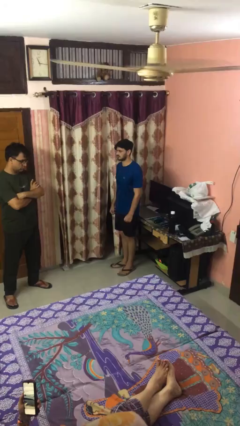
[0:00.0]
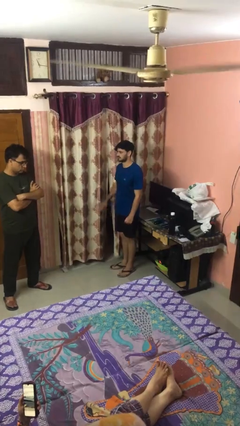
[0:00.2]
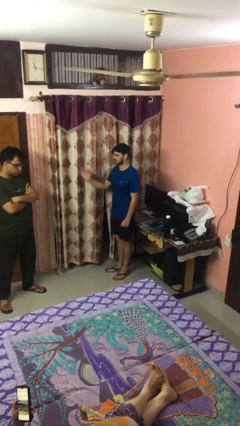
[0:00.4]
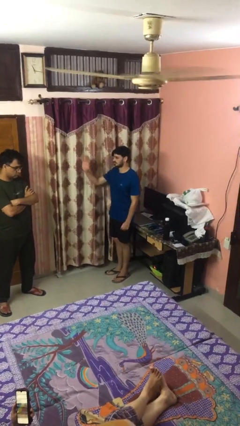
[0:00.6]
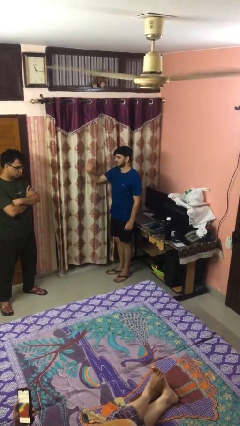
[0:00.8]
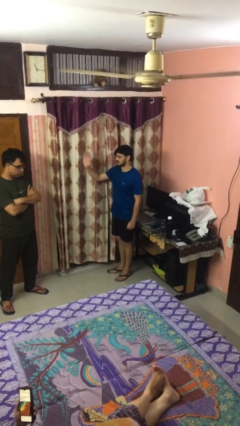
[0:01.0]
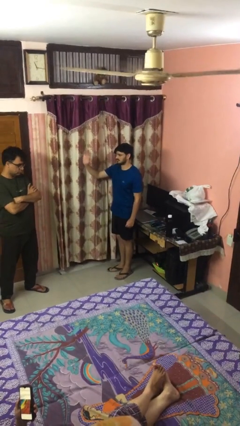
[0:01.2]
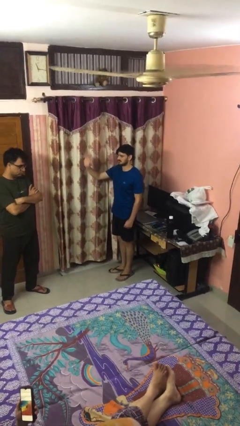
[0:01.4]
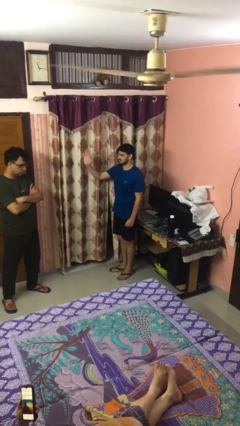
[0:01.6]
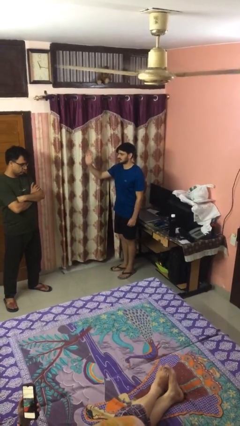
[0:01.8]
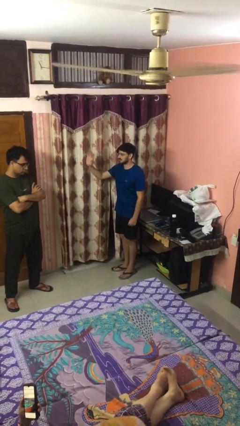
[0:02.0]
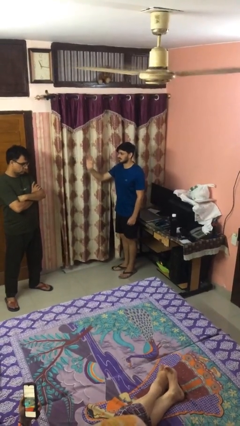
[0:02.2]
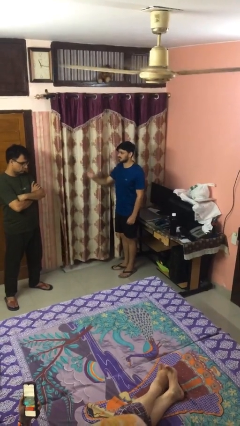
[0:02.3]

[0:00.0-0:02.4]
person waves at person

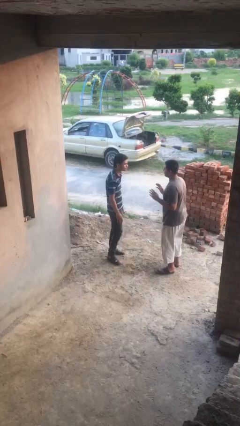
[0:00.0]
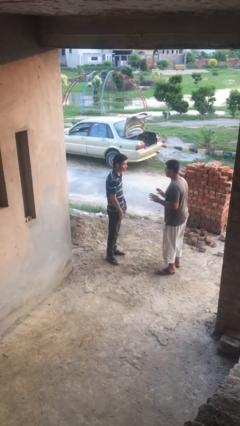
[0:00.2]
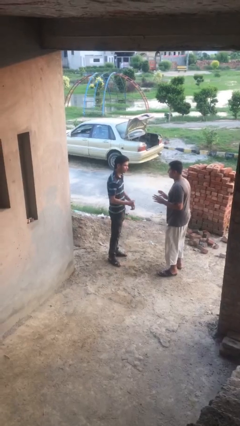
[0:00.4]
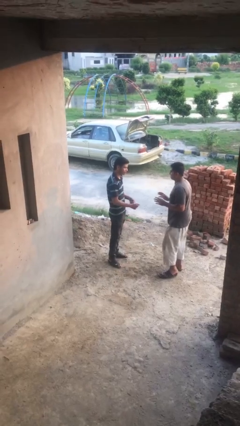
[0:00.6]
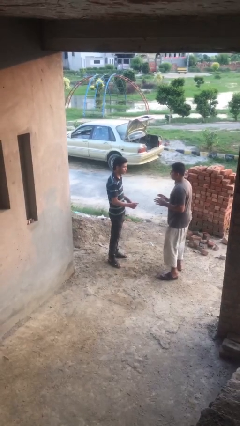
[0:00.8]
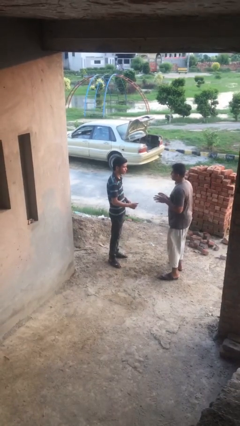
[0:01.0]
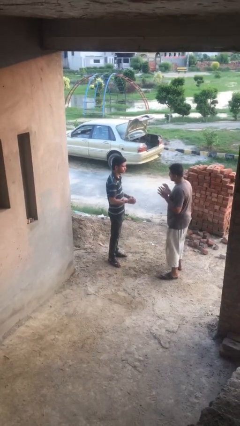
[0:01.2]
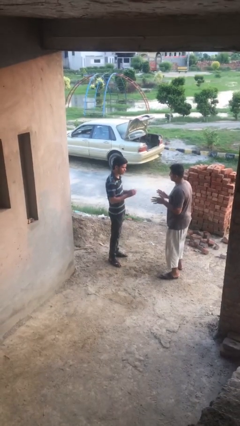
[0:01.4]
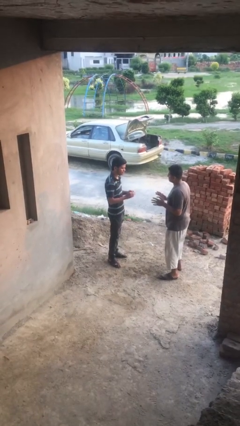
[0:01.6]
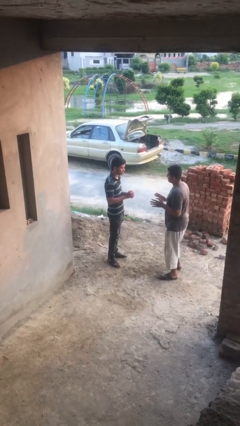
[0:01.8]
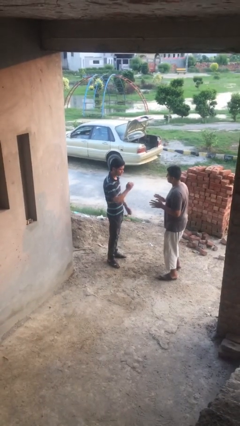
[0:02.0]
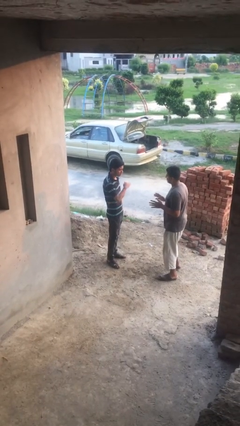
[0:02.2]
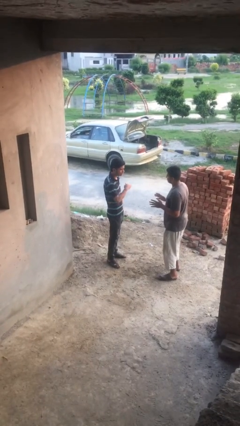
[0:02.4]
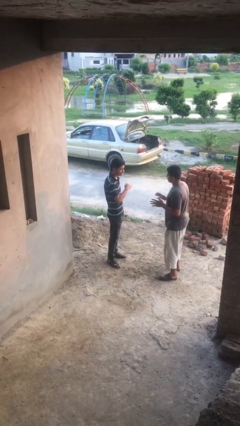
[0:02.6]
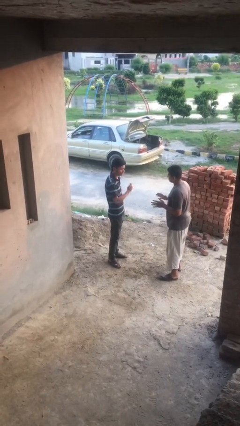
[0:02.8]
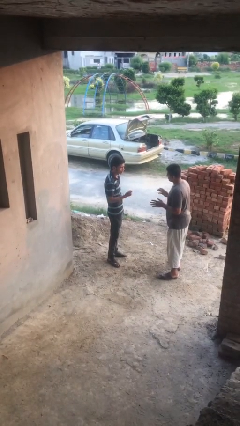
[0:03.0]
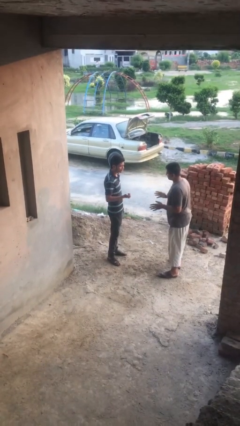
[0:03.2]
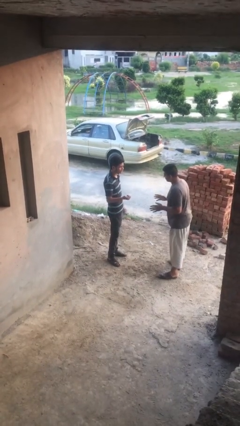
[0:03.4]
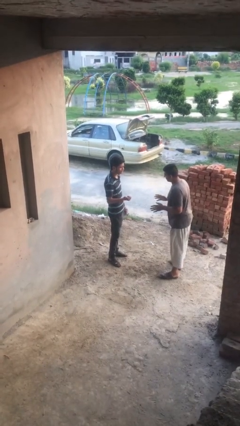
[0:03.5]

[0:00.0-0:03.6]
person talks to person

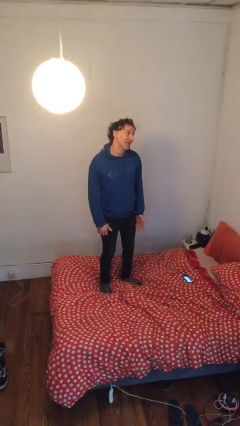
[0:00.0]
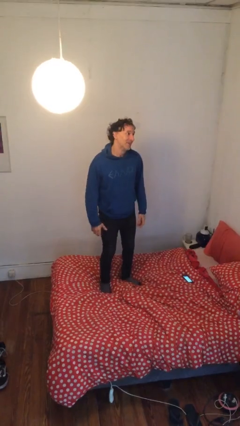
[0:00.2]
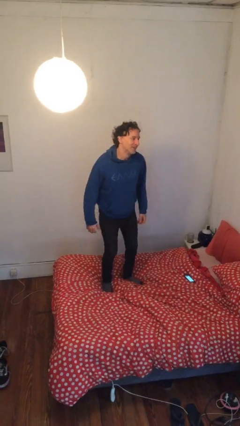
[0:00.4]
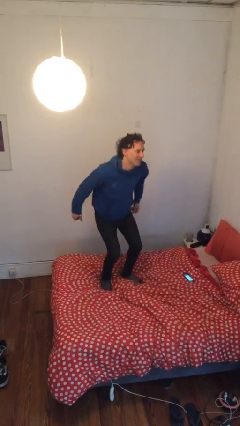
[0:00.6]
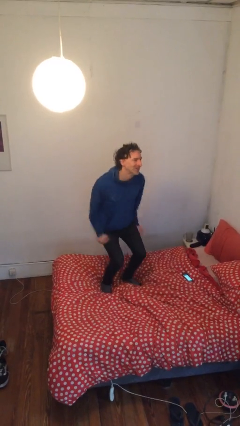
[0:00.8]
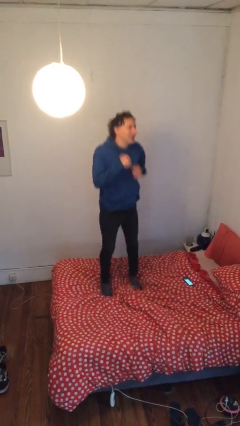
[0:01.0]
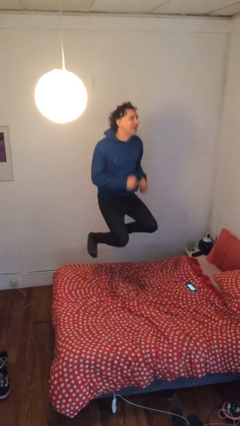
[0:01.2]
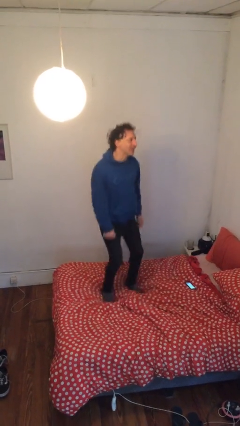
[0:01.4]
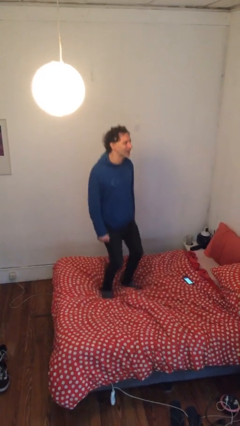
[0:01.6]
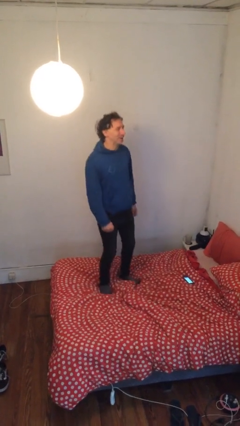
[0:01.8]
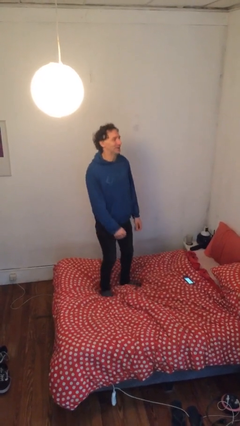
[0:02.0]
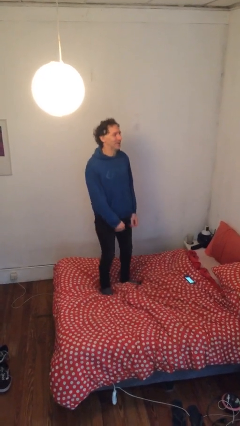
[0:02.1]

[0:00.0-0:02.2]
person jumps on bed

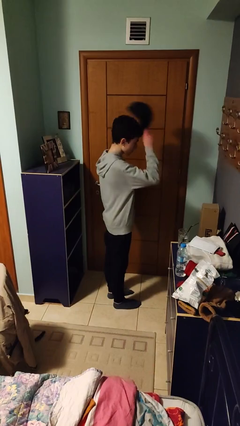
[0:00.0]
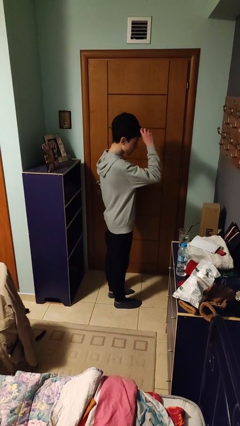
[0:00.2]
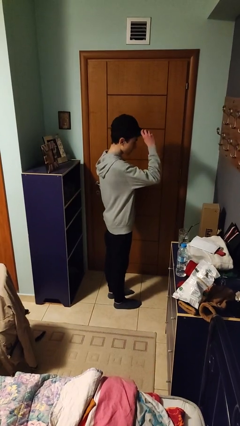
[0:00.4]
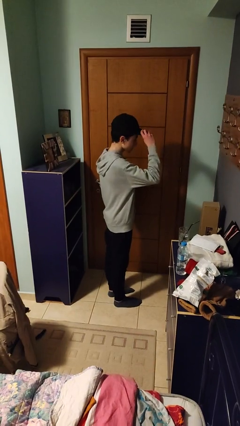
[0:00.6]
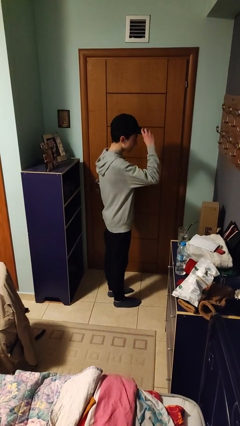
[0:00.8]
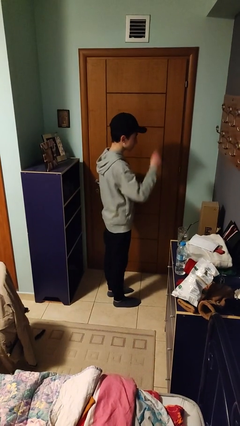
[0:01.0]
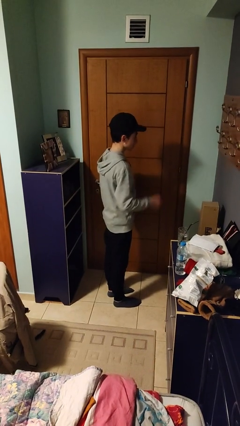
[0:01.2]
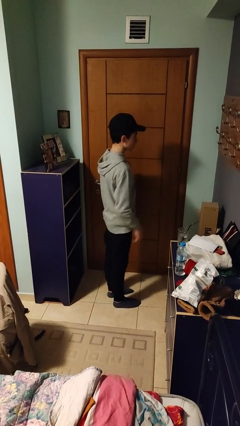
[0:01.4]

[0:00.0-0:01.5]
person puts on hat

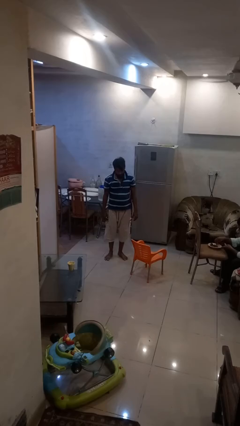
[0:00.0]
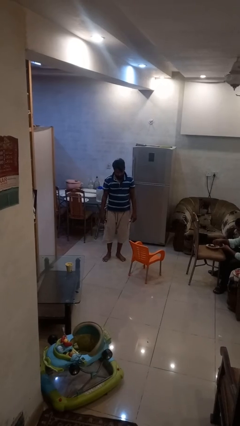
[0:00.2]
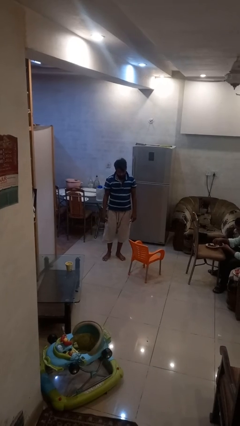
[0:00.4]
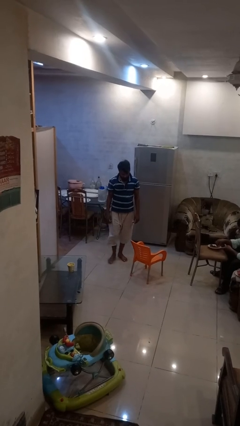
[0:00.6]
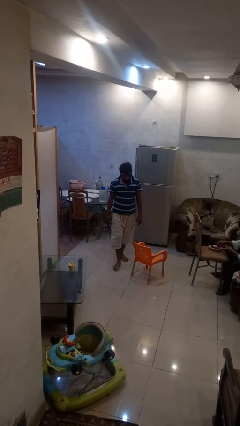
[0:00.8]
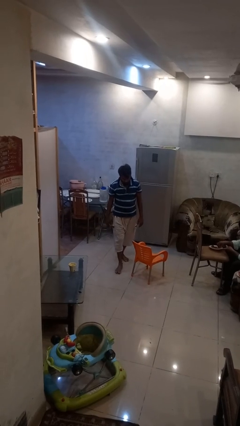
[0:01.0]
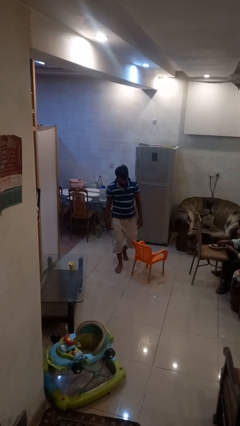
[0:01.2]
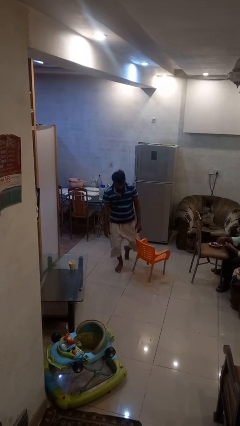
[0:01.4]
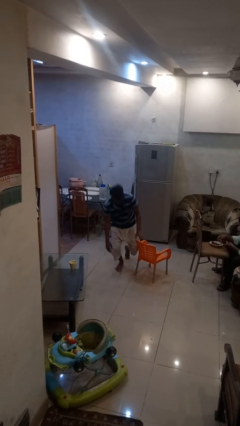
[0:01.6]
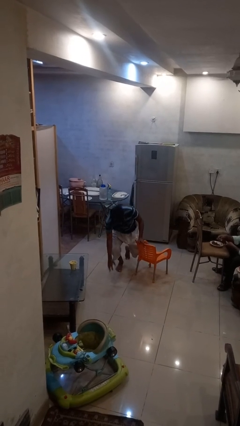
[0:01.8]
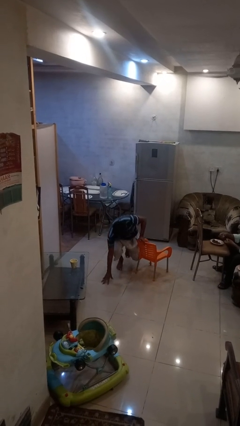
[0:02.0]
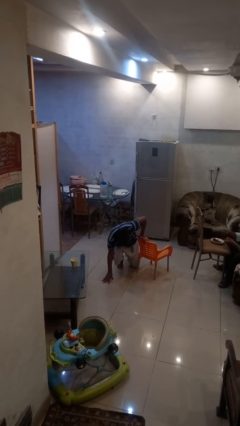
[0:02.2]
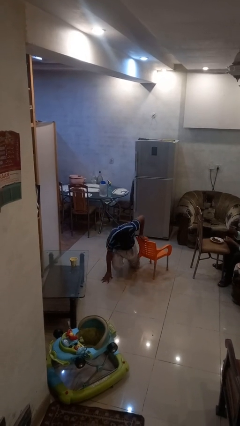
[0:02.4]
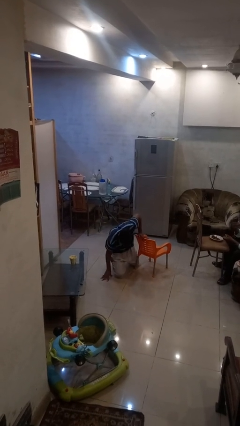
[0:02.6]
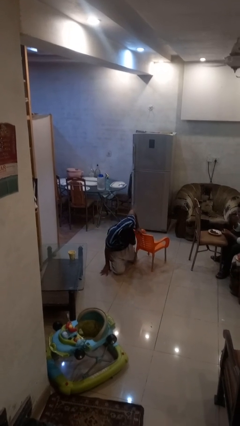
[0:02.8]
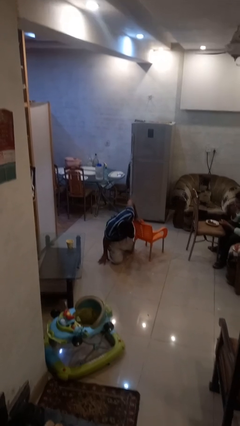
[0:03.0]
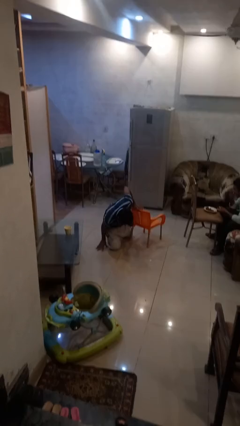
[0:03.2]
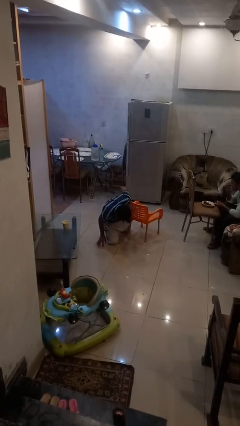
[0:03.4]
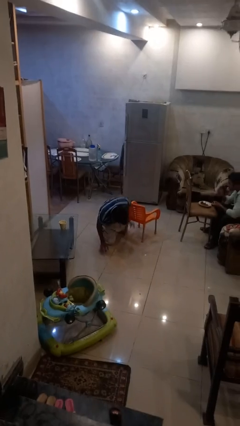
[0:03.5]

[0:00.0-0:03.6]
person trips on object on floor

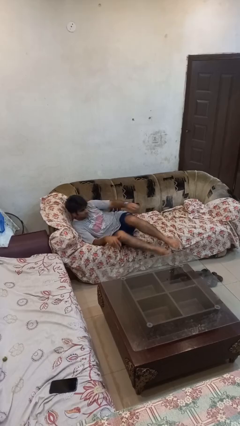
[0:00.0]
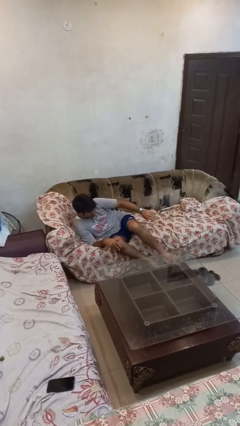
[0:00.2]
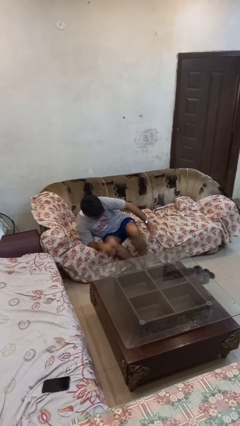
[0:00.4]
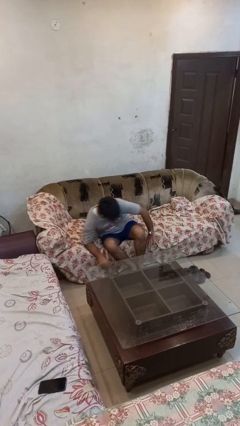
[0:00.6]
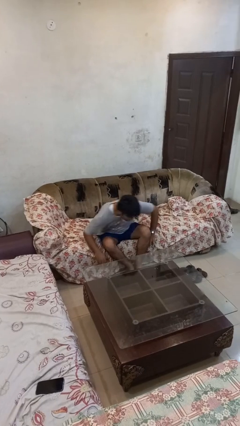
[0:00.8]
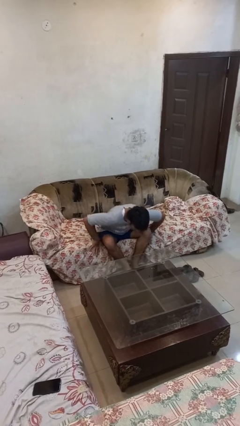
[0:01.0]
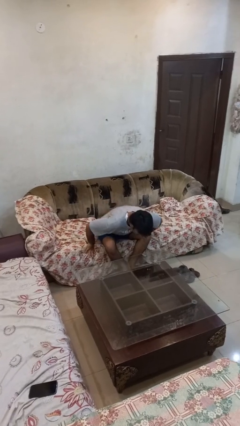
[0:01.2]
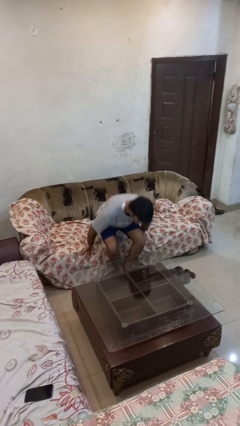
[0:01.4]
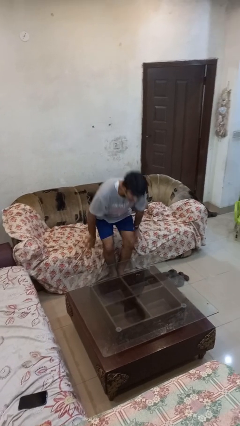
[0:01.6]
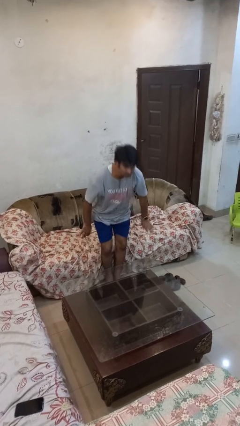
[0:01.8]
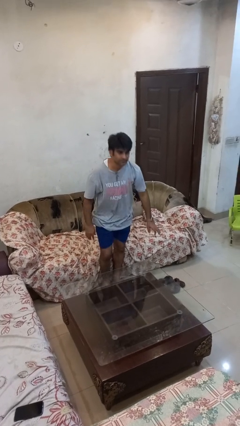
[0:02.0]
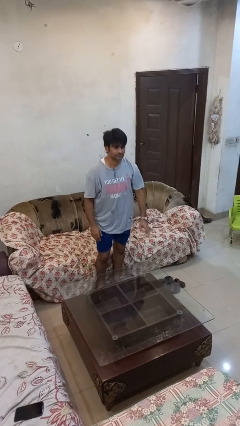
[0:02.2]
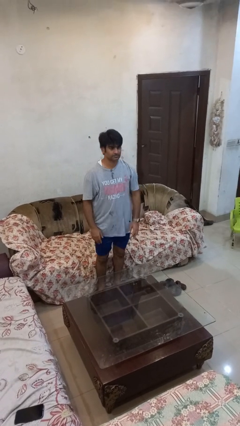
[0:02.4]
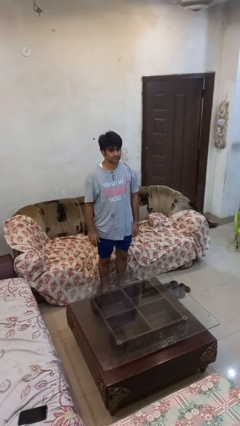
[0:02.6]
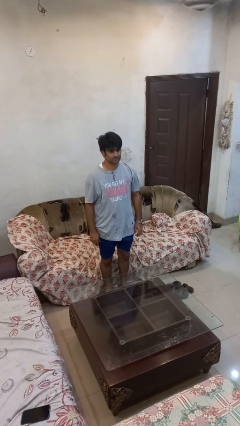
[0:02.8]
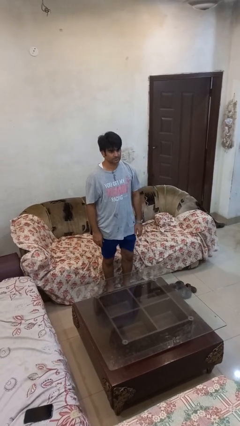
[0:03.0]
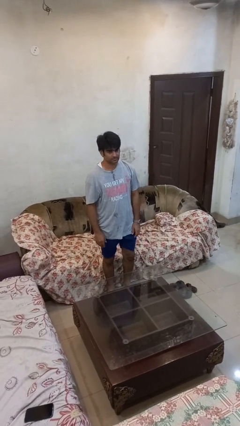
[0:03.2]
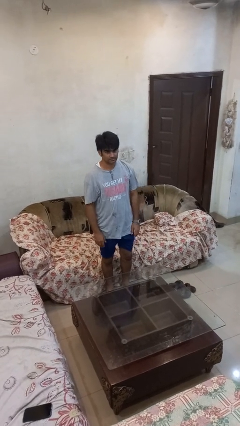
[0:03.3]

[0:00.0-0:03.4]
person stands up

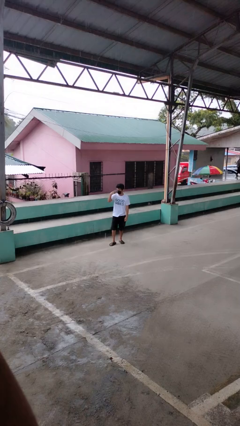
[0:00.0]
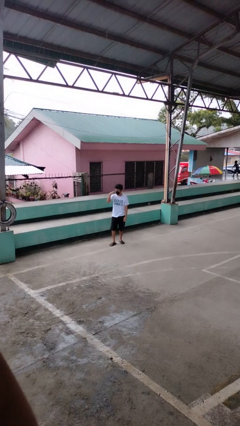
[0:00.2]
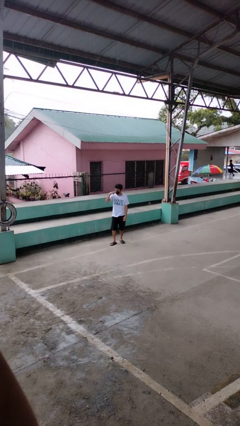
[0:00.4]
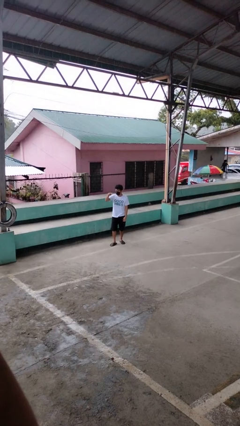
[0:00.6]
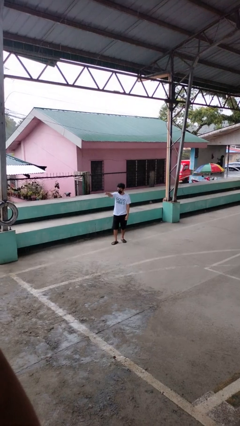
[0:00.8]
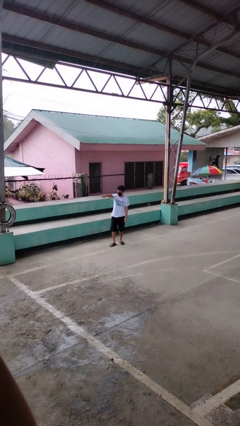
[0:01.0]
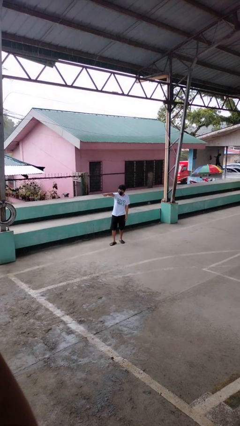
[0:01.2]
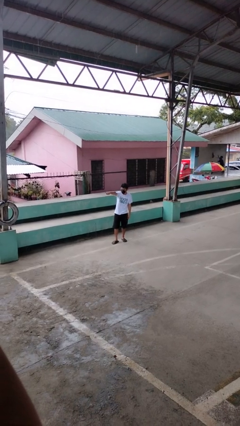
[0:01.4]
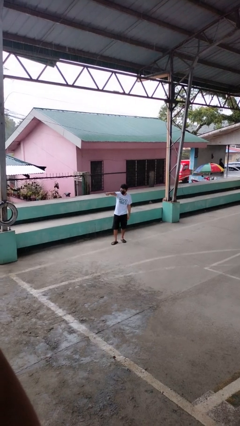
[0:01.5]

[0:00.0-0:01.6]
person gestures watch closely
